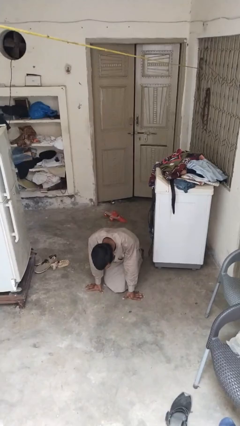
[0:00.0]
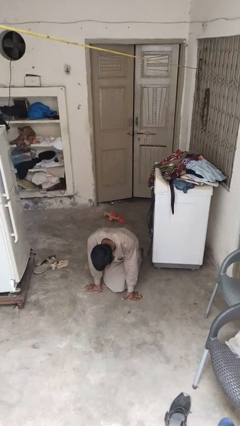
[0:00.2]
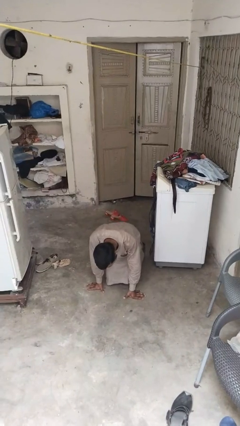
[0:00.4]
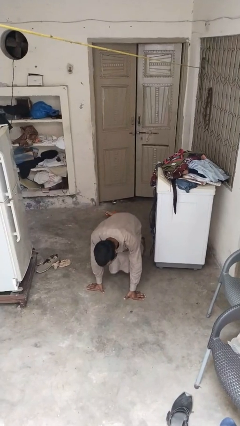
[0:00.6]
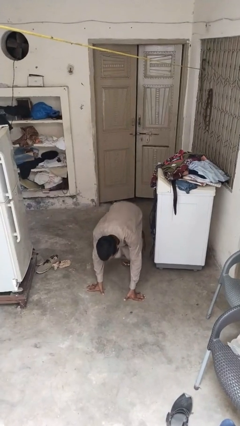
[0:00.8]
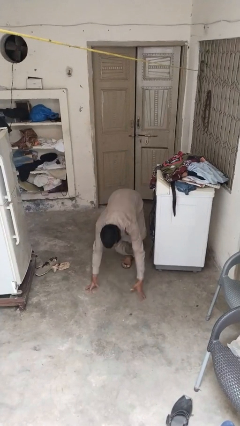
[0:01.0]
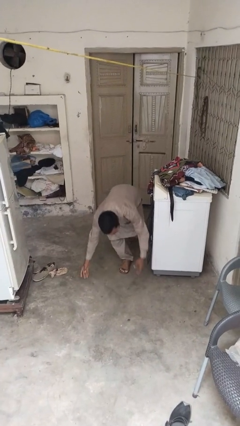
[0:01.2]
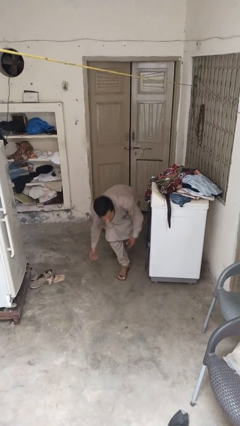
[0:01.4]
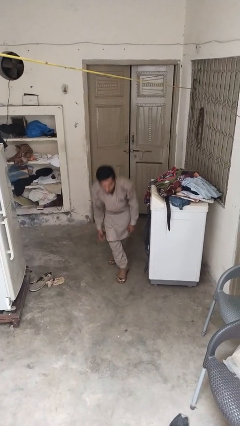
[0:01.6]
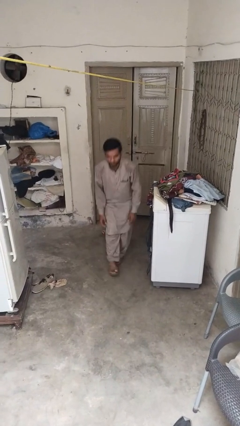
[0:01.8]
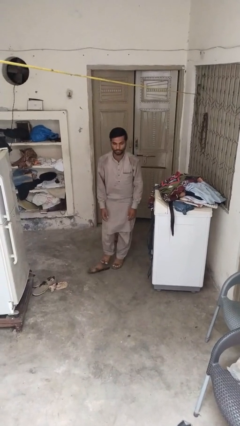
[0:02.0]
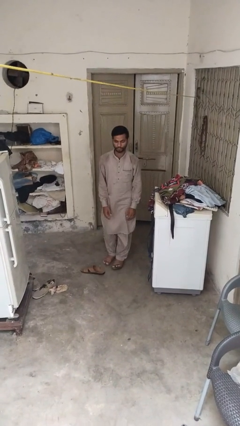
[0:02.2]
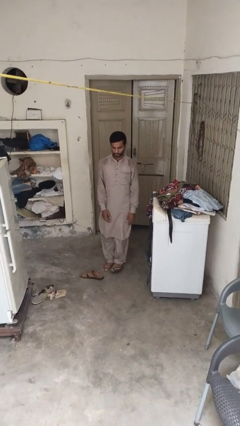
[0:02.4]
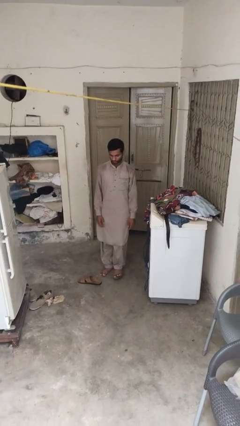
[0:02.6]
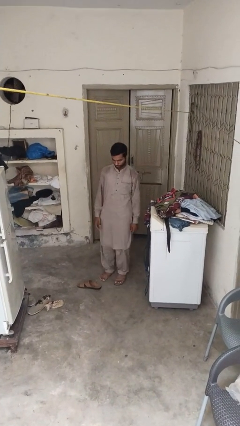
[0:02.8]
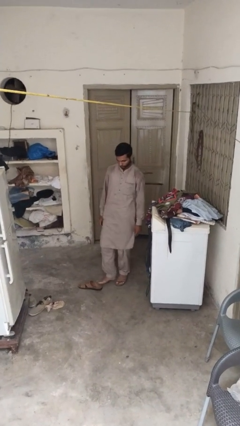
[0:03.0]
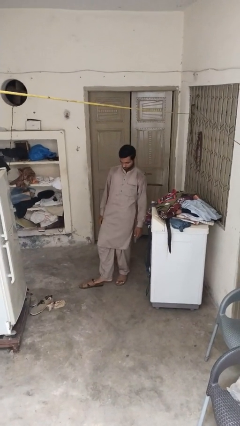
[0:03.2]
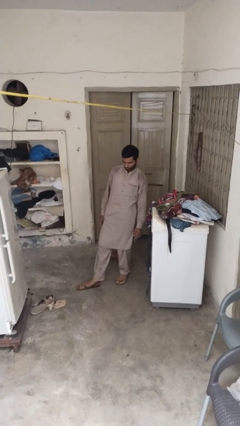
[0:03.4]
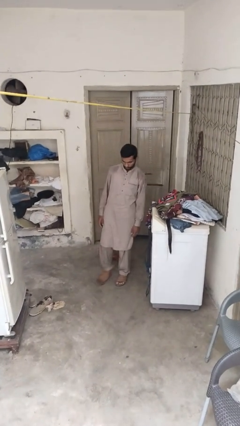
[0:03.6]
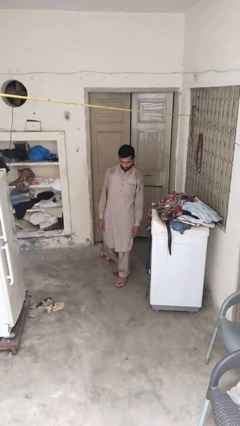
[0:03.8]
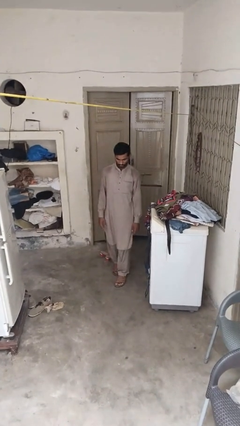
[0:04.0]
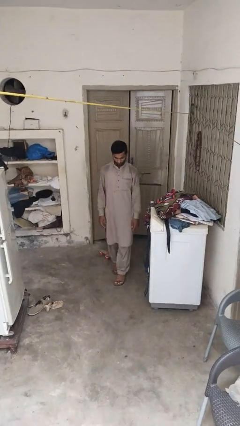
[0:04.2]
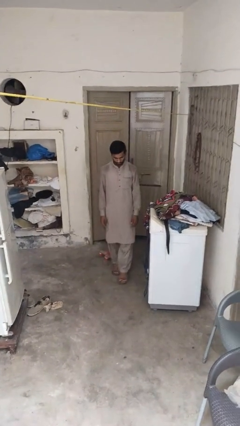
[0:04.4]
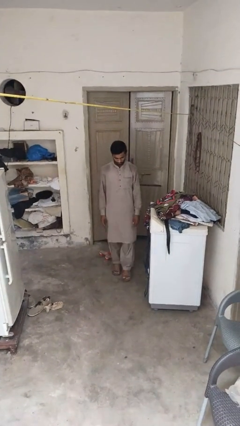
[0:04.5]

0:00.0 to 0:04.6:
person stands up from floor

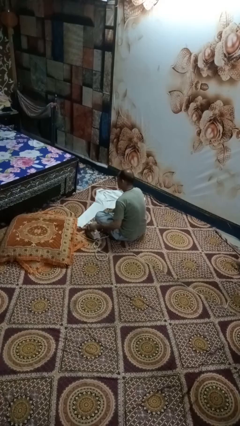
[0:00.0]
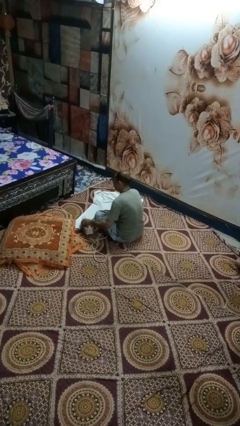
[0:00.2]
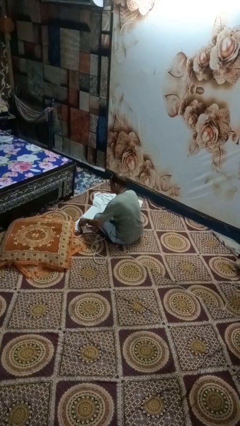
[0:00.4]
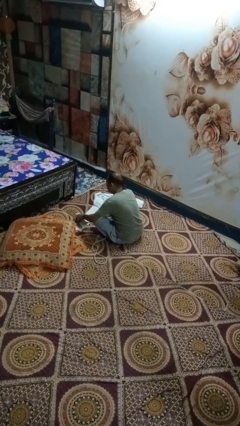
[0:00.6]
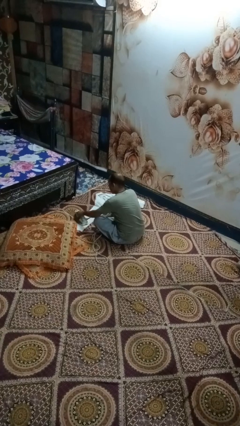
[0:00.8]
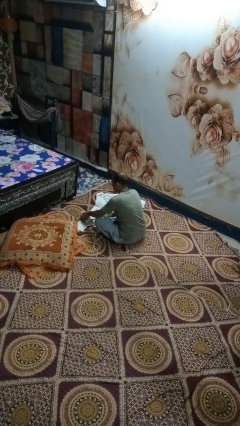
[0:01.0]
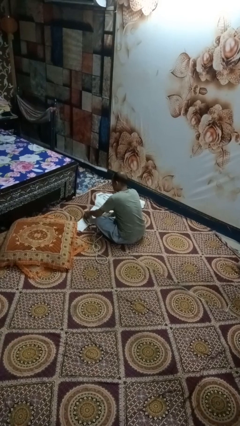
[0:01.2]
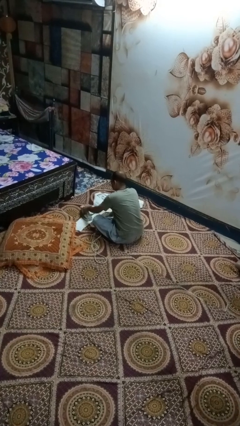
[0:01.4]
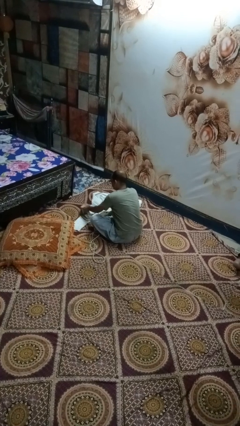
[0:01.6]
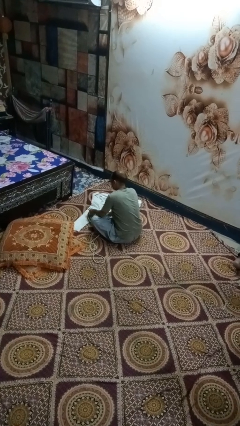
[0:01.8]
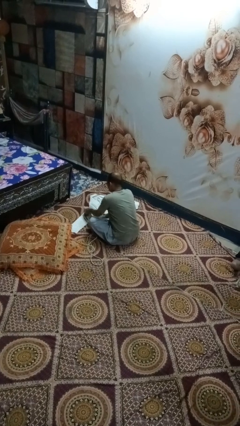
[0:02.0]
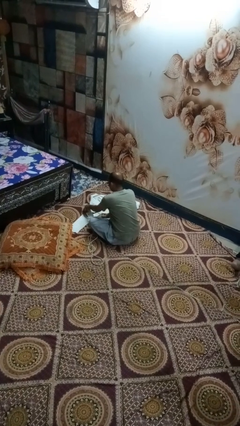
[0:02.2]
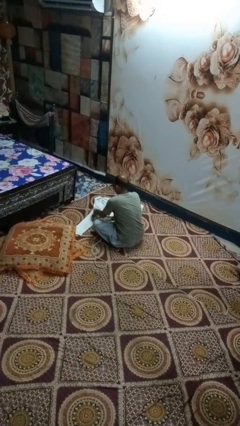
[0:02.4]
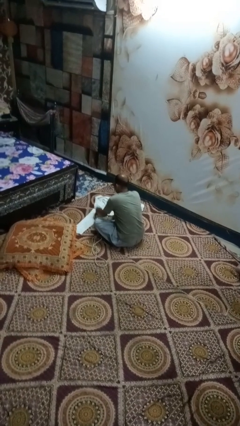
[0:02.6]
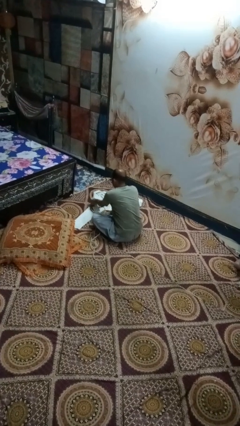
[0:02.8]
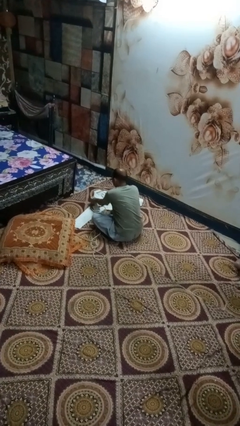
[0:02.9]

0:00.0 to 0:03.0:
person irons clothes

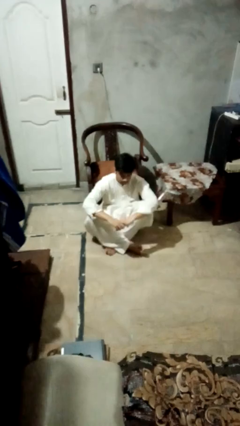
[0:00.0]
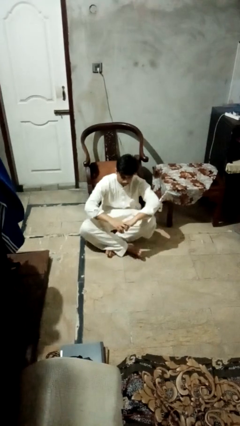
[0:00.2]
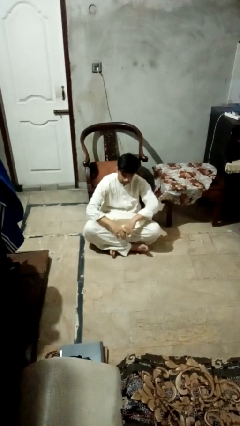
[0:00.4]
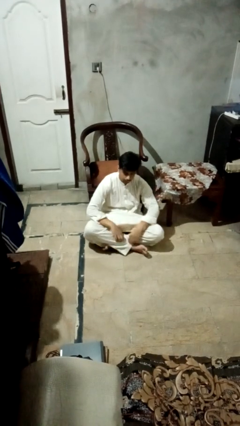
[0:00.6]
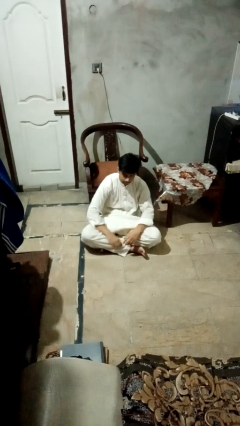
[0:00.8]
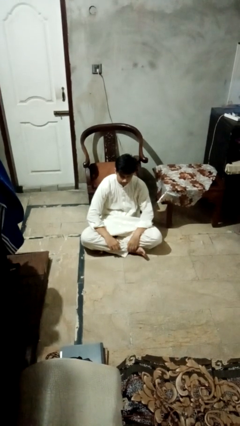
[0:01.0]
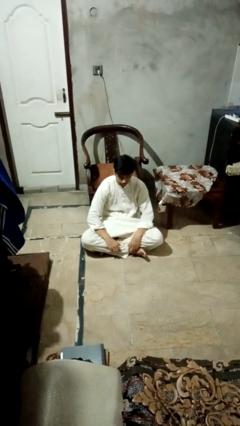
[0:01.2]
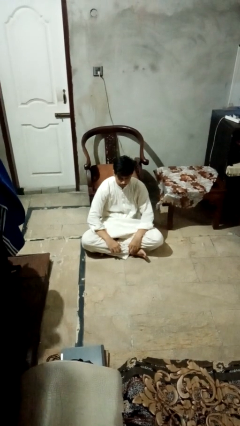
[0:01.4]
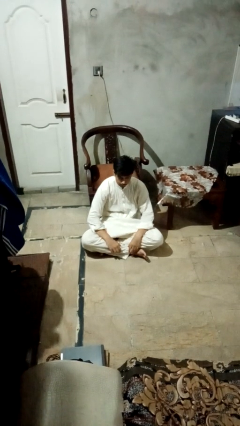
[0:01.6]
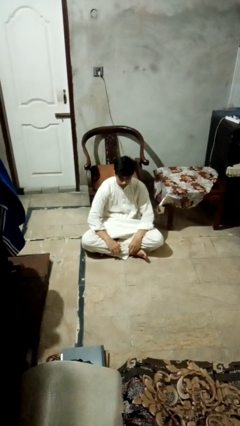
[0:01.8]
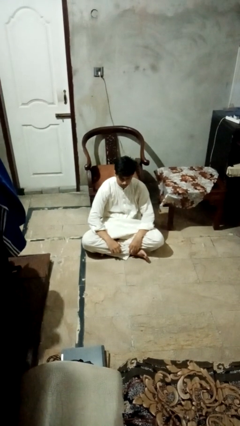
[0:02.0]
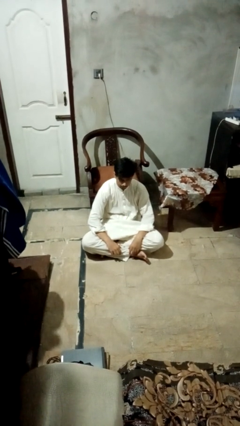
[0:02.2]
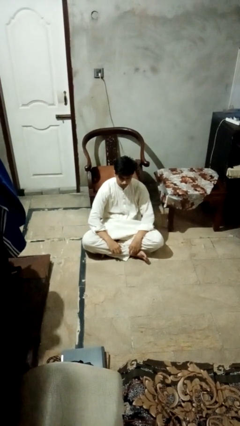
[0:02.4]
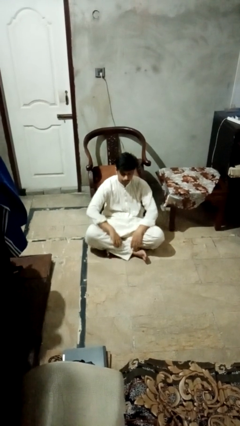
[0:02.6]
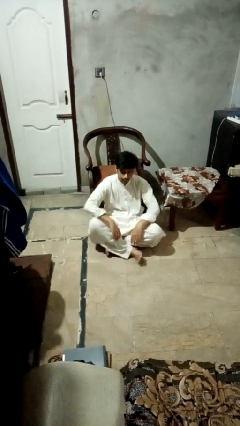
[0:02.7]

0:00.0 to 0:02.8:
person crosses legs

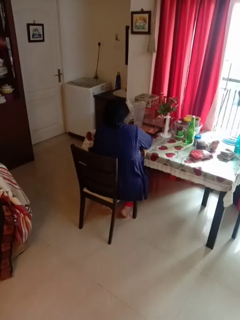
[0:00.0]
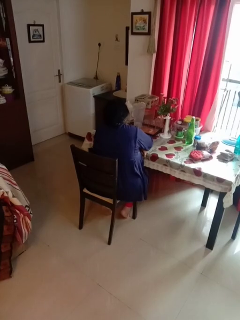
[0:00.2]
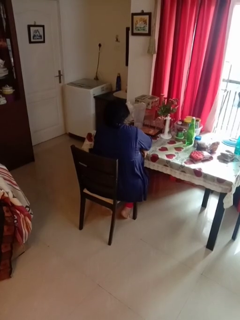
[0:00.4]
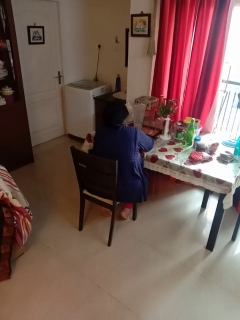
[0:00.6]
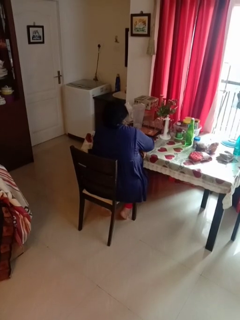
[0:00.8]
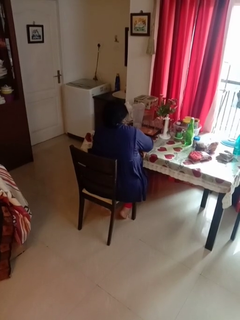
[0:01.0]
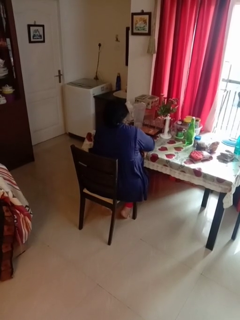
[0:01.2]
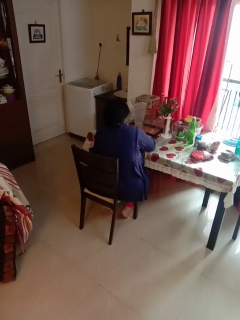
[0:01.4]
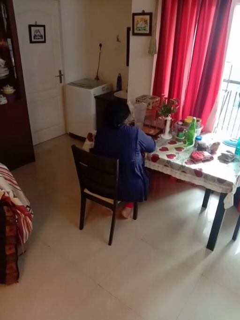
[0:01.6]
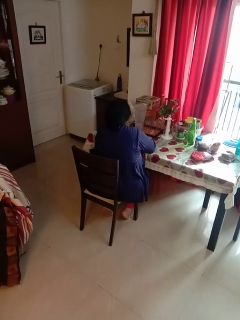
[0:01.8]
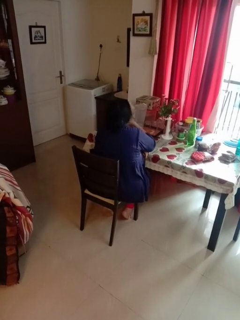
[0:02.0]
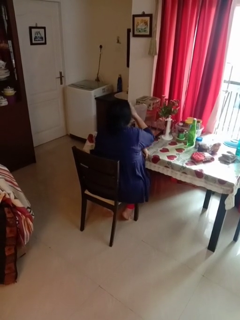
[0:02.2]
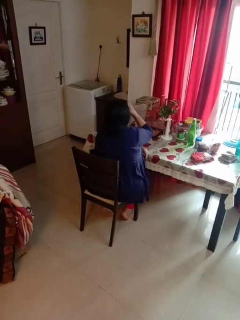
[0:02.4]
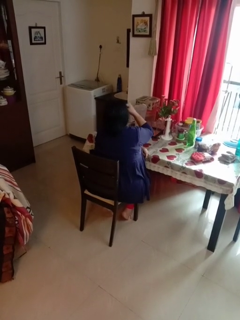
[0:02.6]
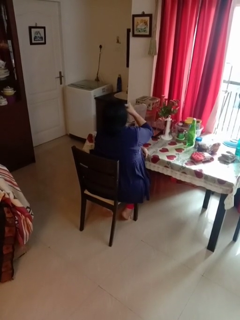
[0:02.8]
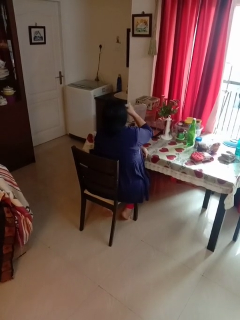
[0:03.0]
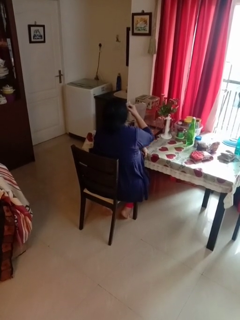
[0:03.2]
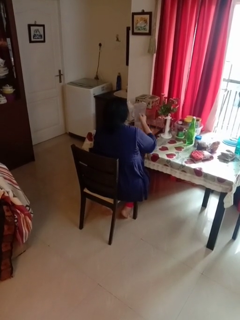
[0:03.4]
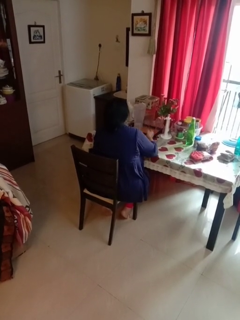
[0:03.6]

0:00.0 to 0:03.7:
person eats with hands

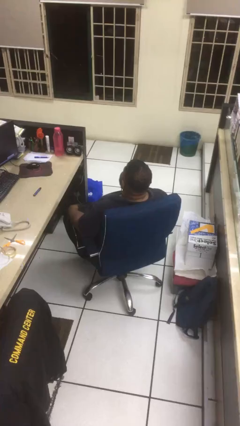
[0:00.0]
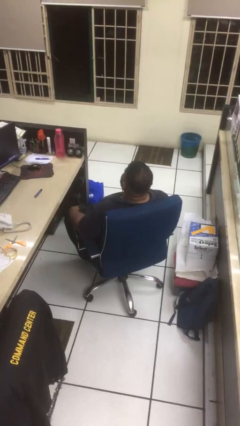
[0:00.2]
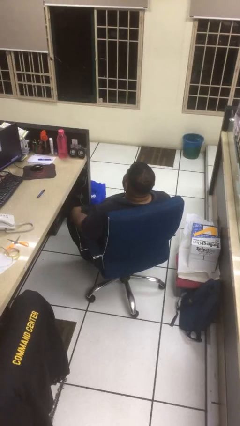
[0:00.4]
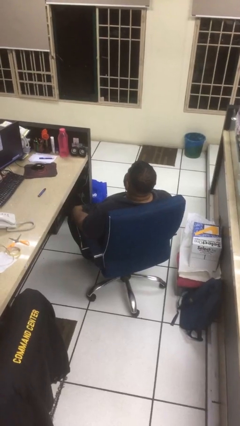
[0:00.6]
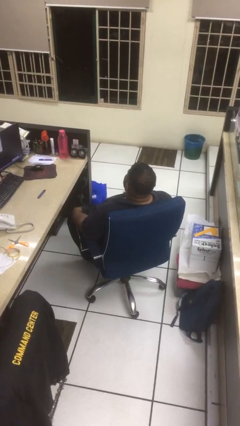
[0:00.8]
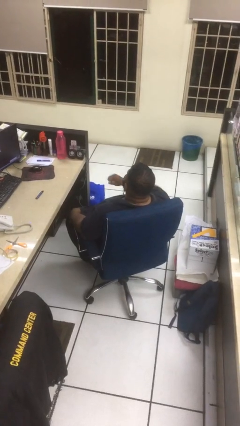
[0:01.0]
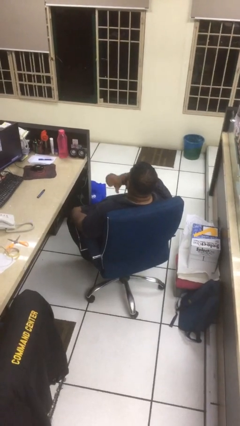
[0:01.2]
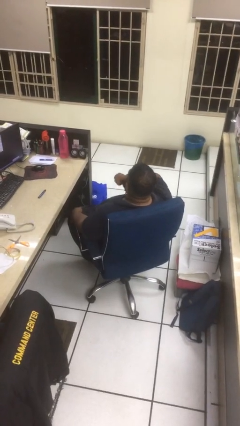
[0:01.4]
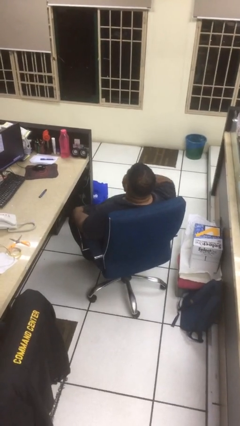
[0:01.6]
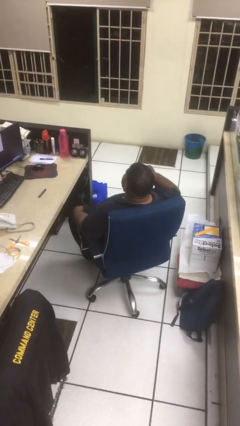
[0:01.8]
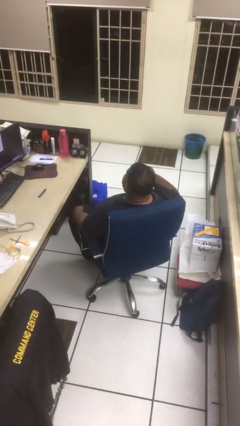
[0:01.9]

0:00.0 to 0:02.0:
person gestures cut

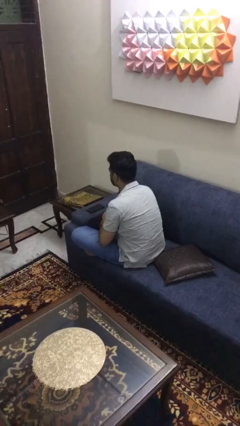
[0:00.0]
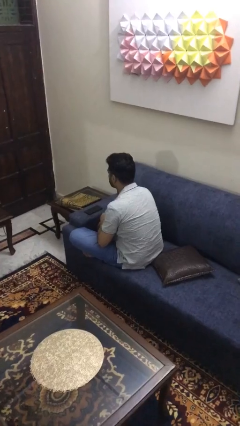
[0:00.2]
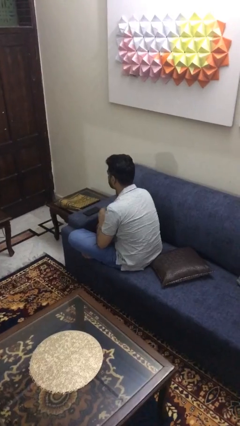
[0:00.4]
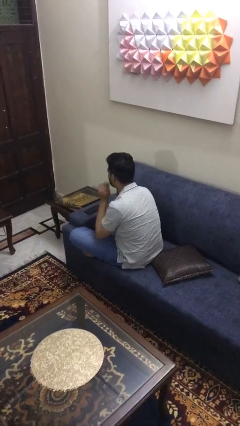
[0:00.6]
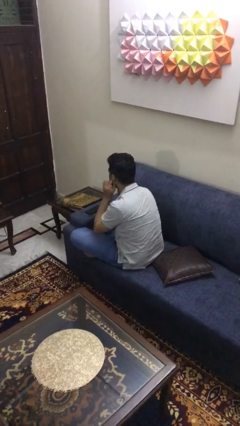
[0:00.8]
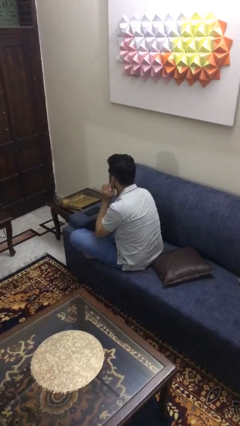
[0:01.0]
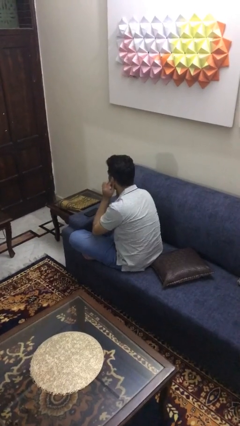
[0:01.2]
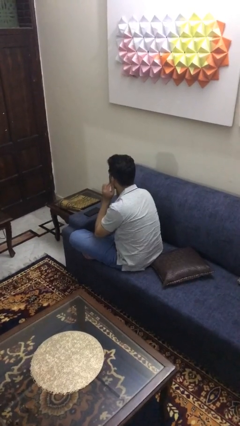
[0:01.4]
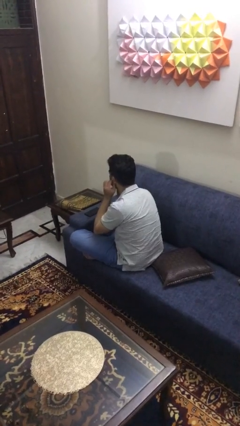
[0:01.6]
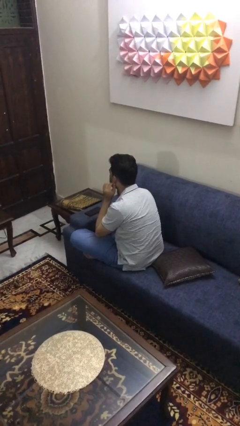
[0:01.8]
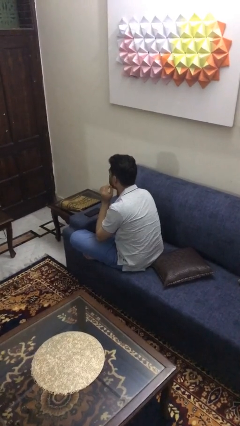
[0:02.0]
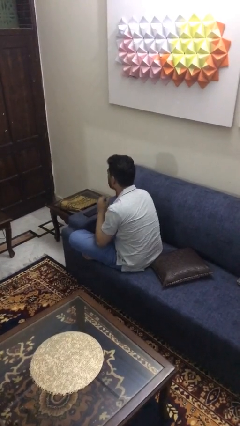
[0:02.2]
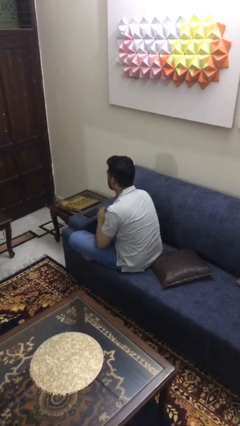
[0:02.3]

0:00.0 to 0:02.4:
person touches earlobe
